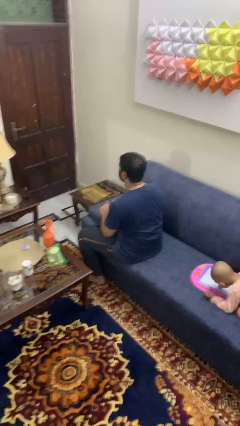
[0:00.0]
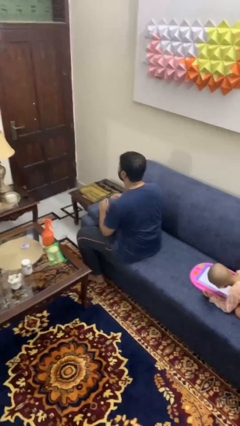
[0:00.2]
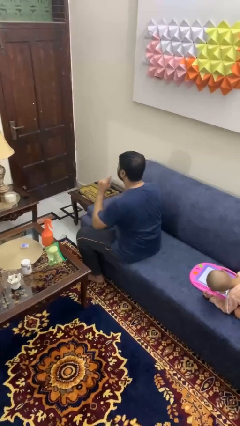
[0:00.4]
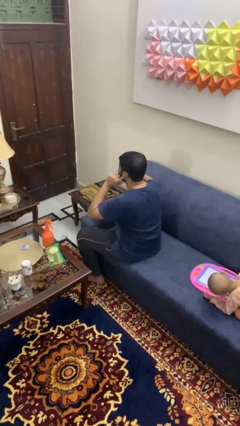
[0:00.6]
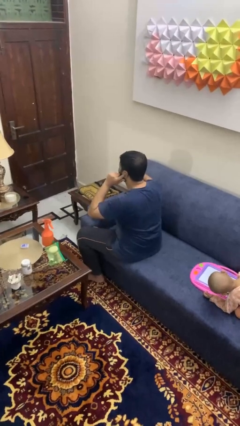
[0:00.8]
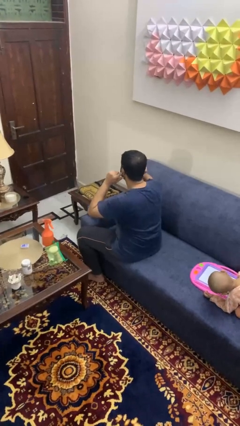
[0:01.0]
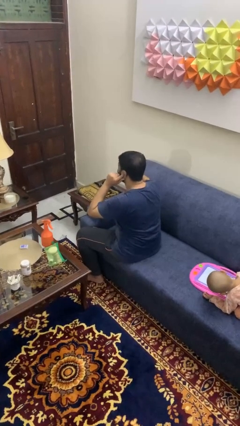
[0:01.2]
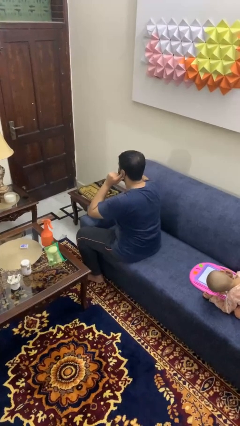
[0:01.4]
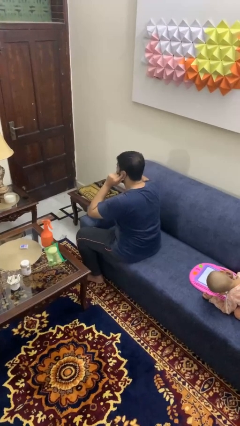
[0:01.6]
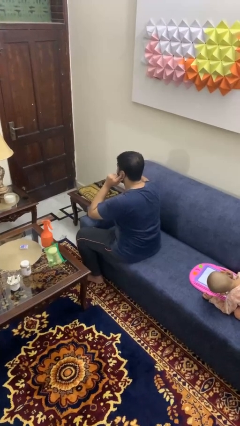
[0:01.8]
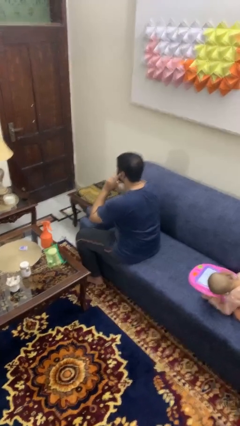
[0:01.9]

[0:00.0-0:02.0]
person puts fingers in ear

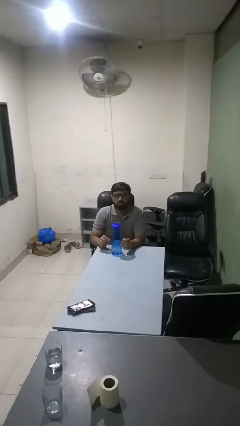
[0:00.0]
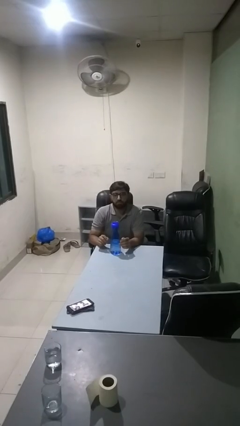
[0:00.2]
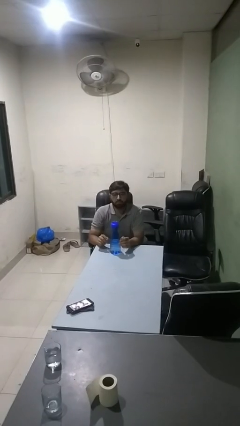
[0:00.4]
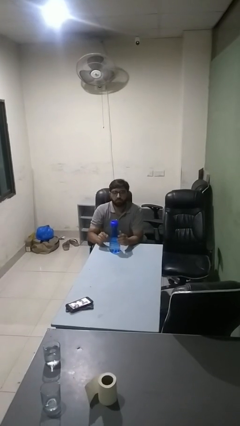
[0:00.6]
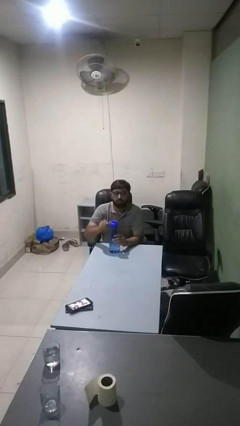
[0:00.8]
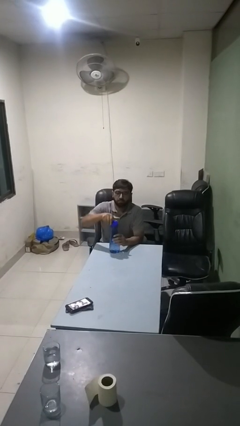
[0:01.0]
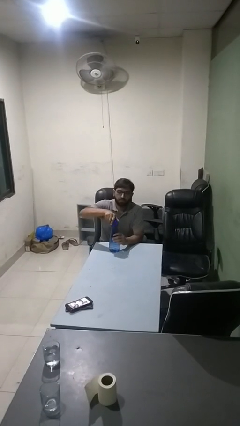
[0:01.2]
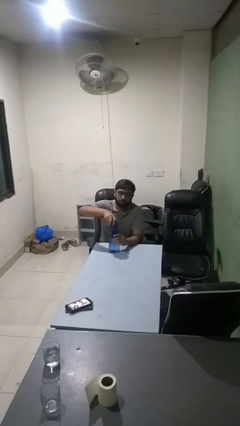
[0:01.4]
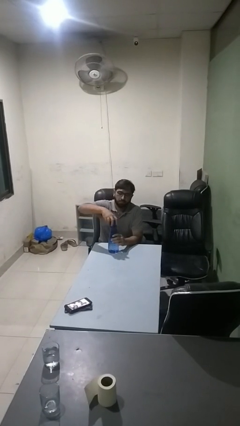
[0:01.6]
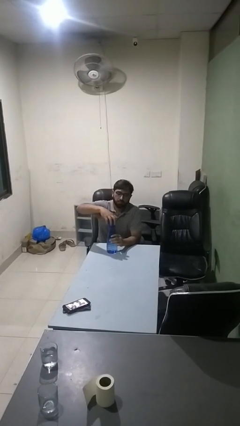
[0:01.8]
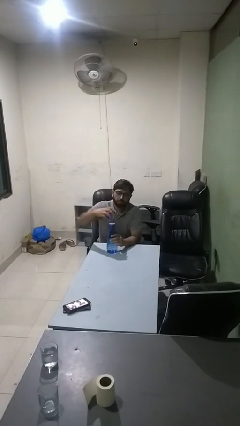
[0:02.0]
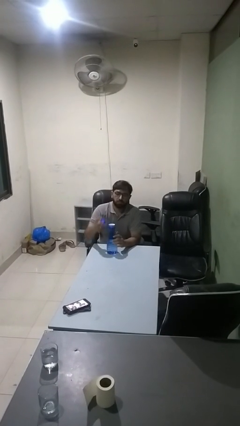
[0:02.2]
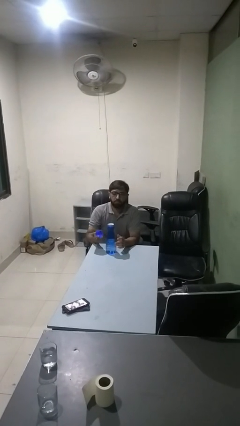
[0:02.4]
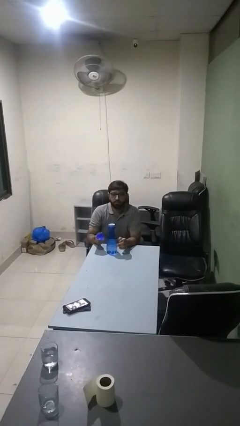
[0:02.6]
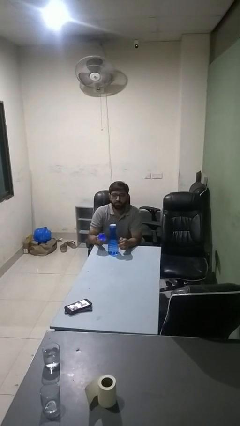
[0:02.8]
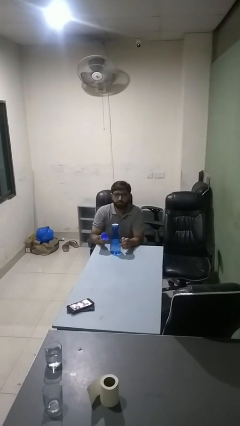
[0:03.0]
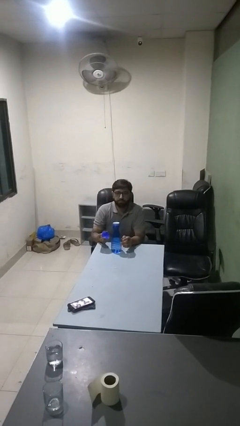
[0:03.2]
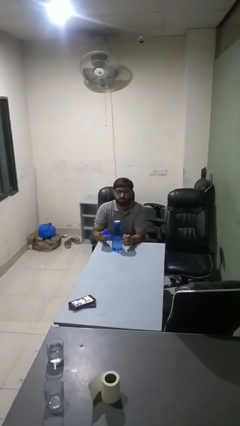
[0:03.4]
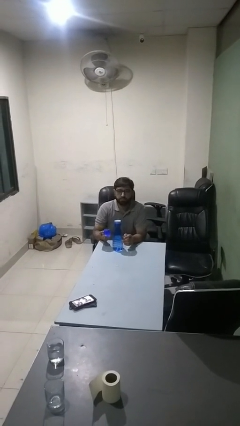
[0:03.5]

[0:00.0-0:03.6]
person unscrews lid from bottle

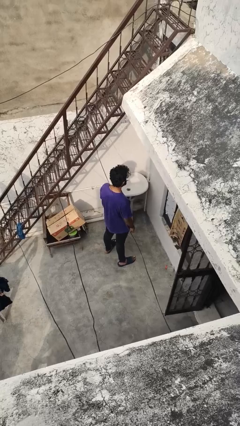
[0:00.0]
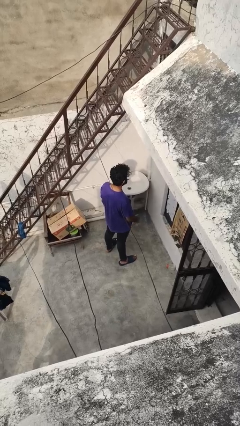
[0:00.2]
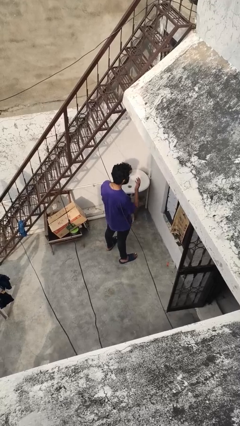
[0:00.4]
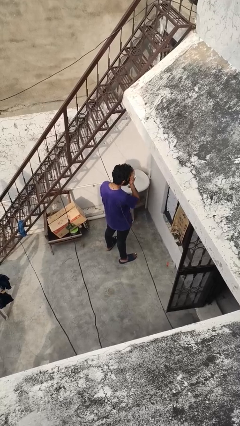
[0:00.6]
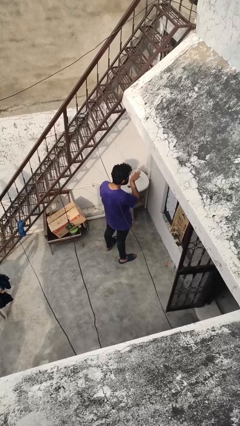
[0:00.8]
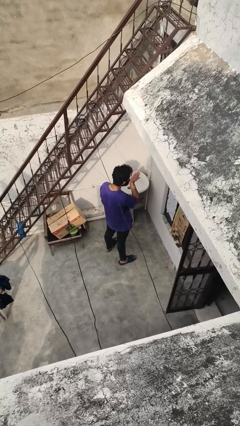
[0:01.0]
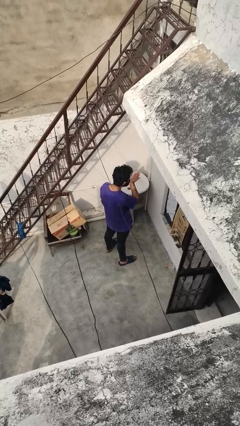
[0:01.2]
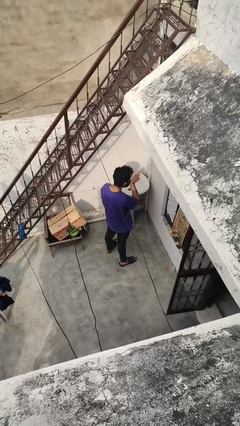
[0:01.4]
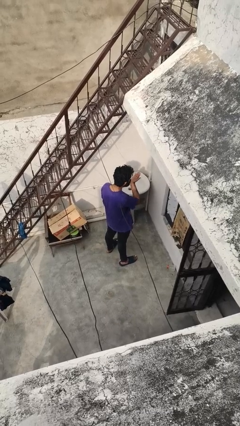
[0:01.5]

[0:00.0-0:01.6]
person gestures blow kiss

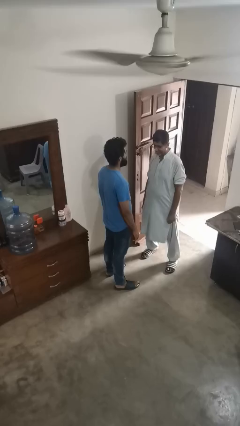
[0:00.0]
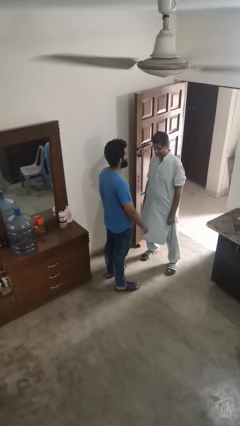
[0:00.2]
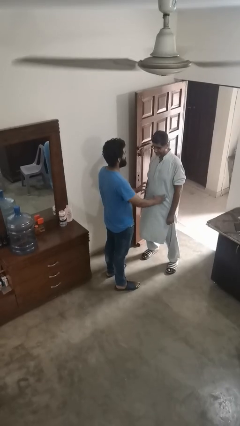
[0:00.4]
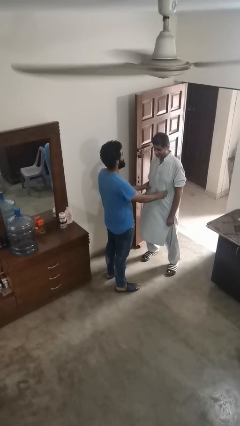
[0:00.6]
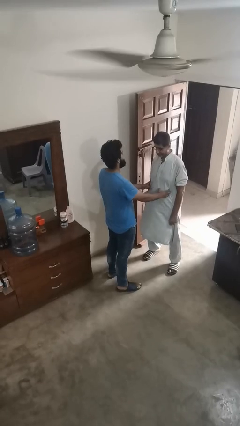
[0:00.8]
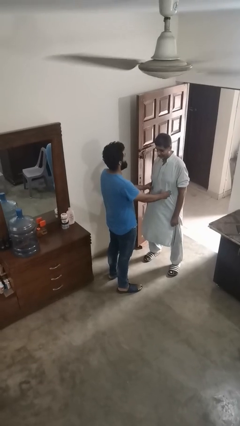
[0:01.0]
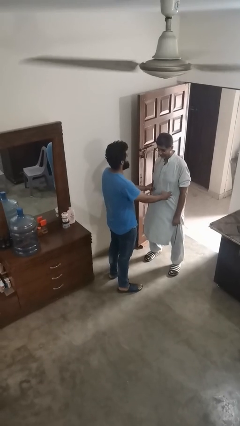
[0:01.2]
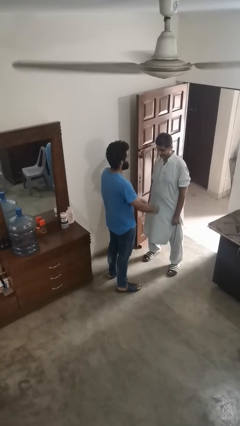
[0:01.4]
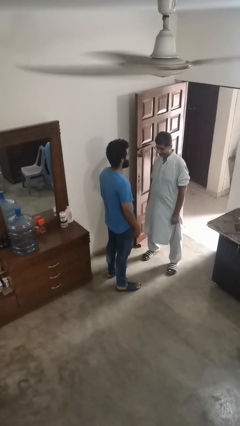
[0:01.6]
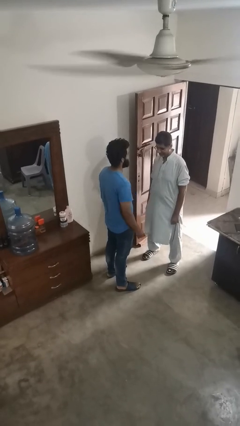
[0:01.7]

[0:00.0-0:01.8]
person tickles person

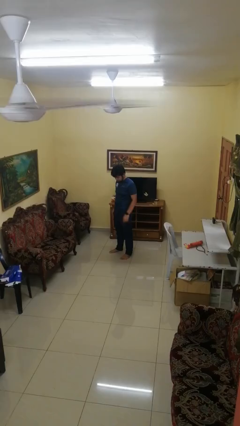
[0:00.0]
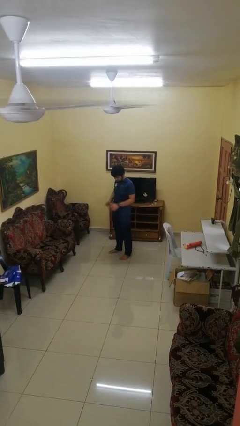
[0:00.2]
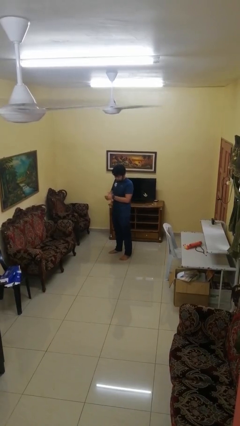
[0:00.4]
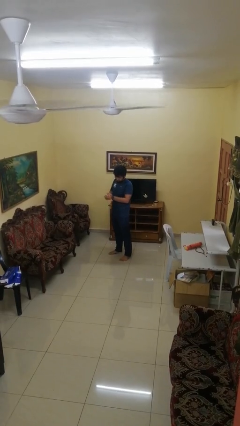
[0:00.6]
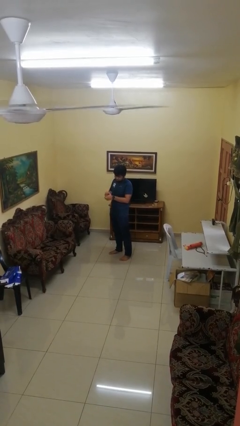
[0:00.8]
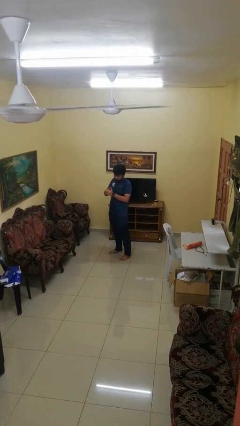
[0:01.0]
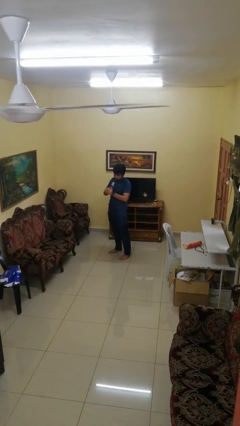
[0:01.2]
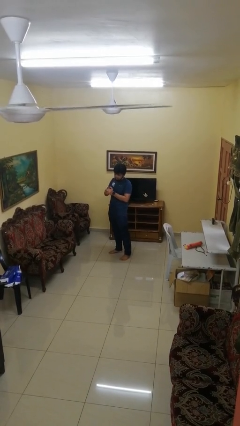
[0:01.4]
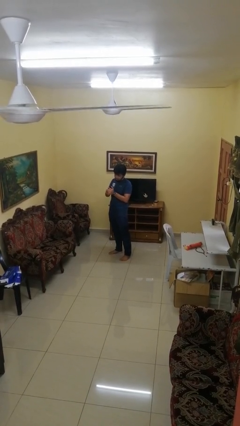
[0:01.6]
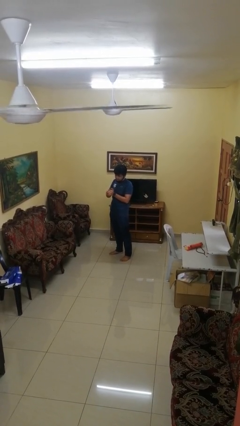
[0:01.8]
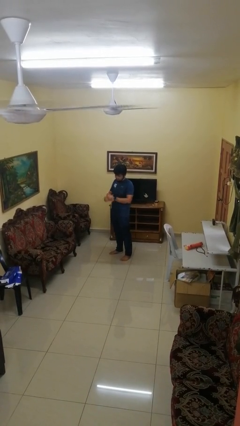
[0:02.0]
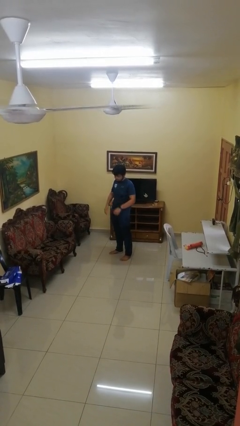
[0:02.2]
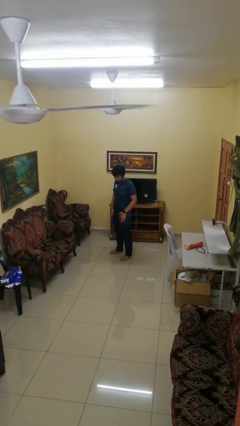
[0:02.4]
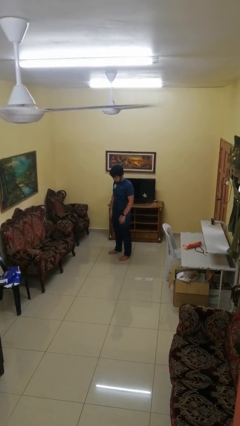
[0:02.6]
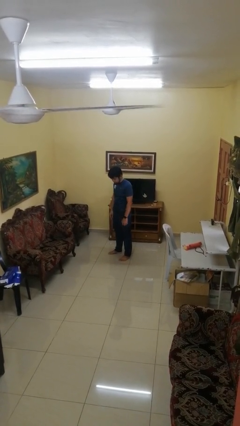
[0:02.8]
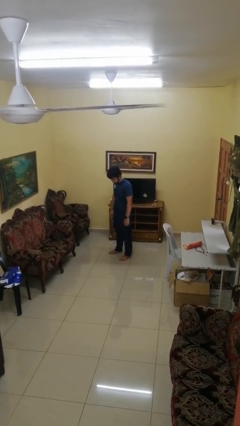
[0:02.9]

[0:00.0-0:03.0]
person cracks knuckles

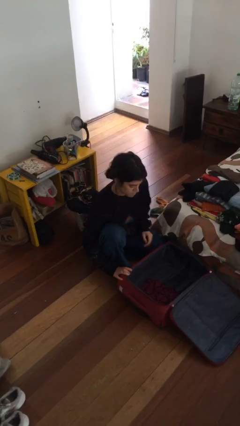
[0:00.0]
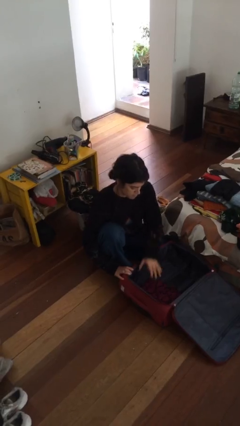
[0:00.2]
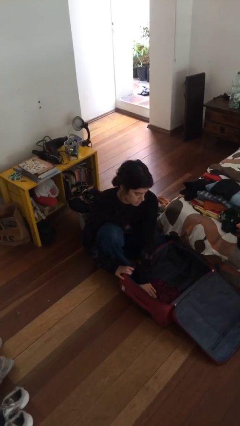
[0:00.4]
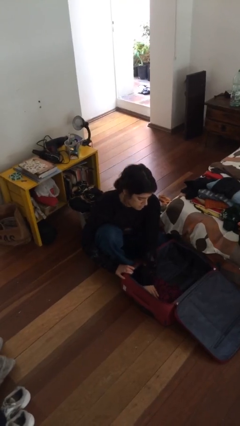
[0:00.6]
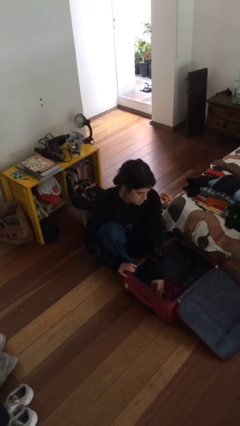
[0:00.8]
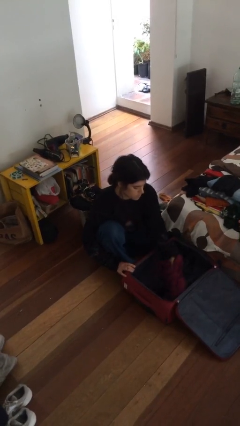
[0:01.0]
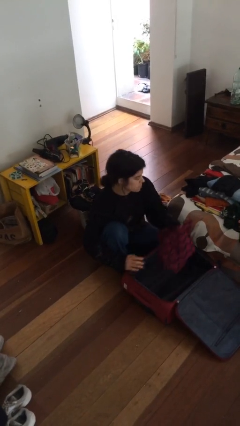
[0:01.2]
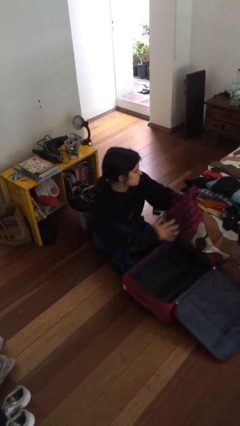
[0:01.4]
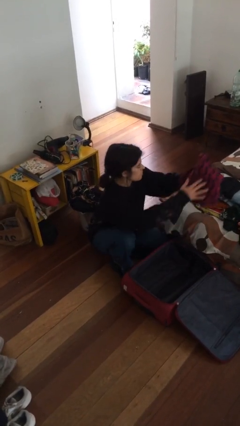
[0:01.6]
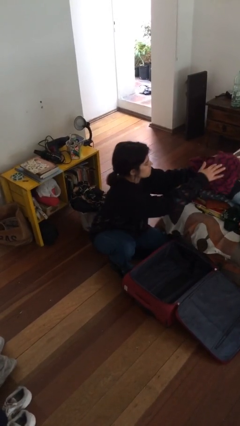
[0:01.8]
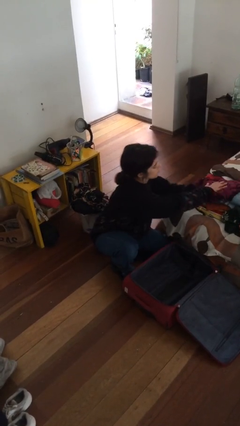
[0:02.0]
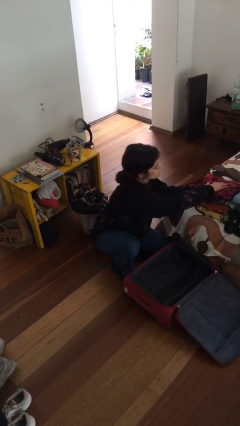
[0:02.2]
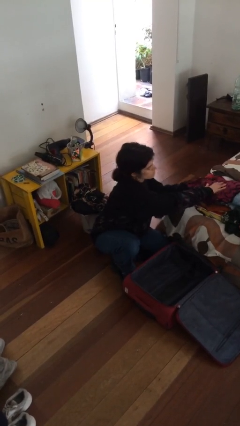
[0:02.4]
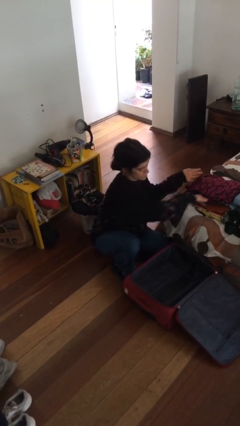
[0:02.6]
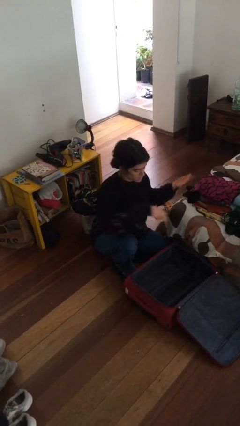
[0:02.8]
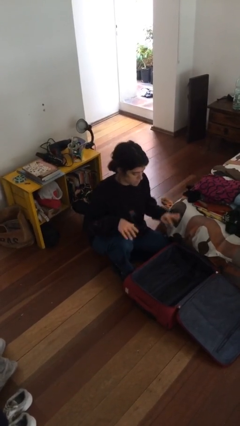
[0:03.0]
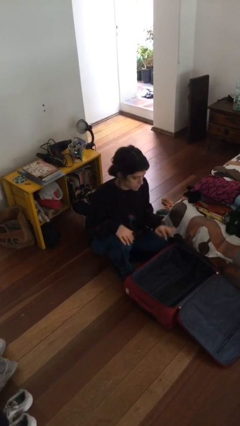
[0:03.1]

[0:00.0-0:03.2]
person unloads clothes from suitcase

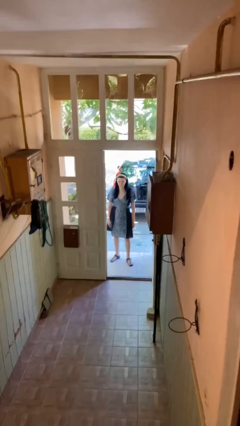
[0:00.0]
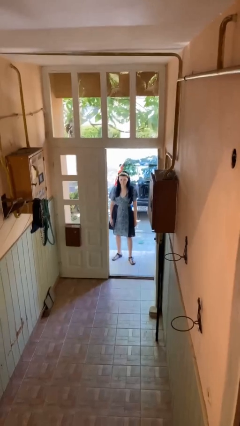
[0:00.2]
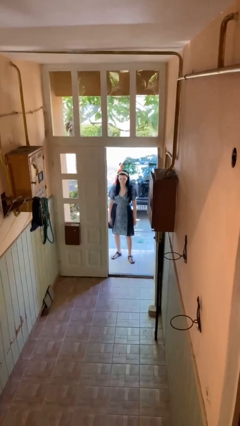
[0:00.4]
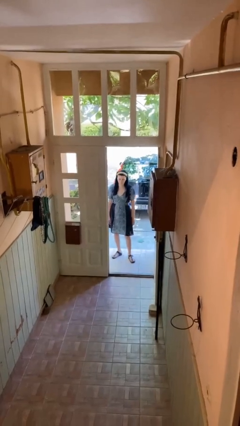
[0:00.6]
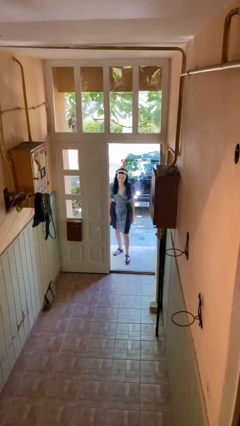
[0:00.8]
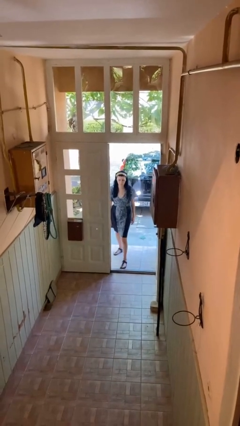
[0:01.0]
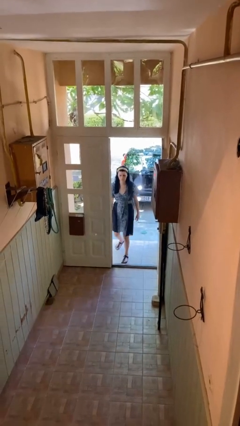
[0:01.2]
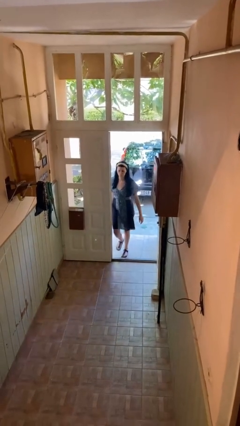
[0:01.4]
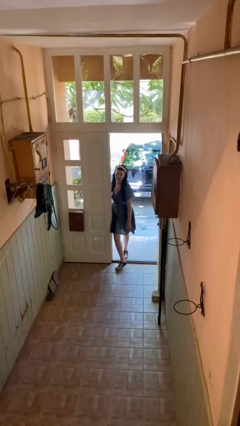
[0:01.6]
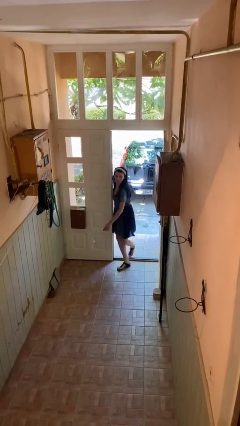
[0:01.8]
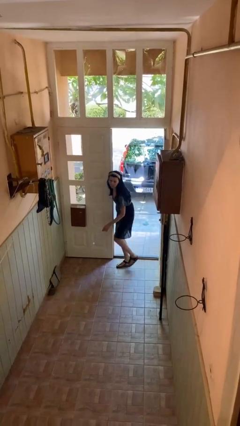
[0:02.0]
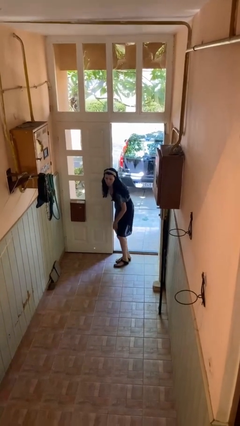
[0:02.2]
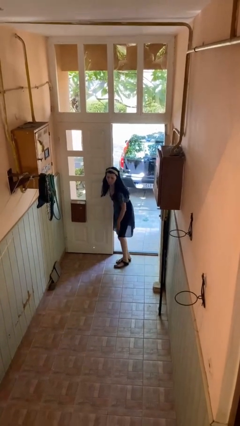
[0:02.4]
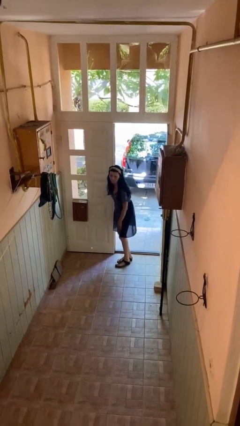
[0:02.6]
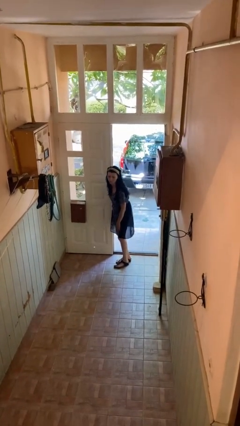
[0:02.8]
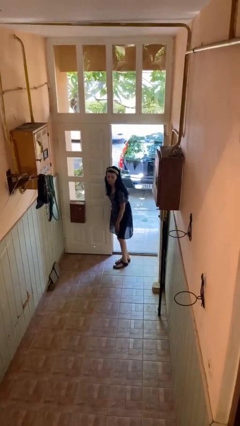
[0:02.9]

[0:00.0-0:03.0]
person bumps into wall
